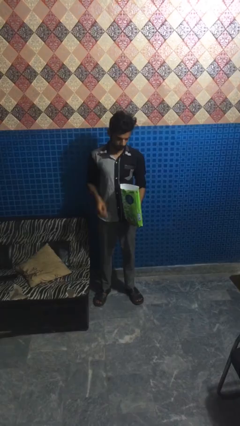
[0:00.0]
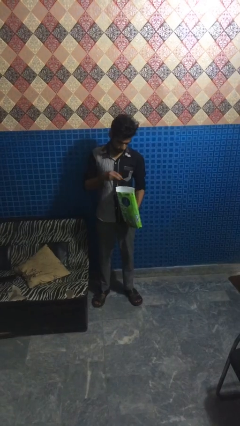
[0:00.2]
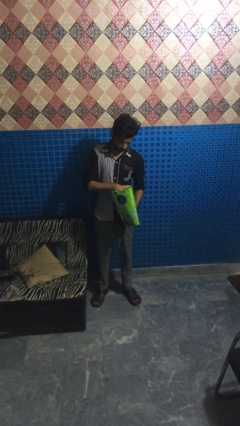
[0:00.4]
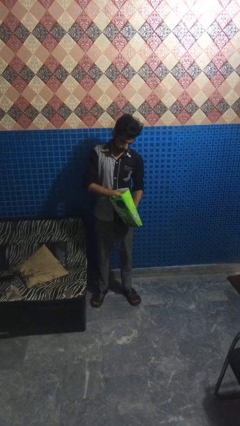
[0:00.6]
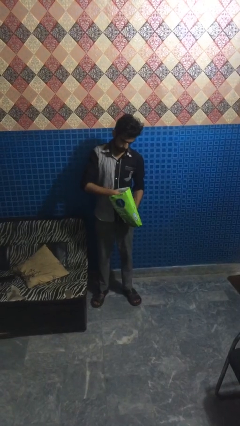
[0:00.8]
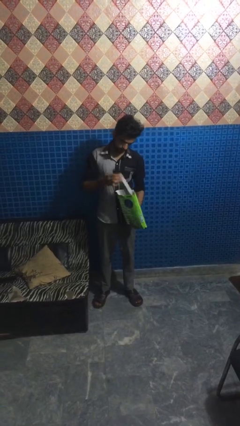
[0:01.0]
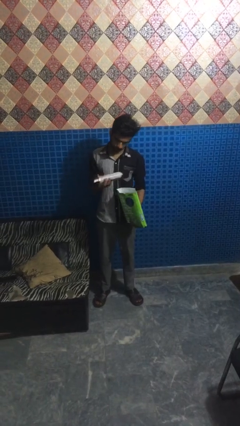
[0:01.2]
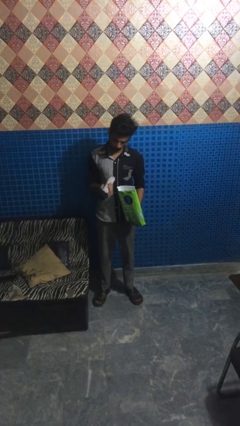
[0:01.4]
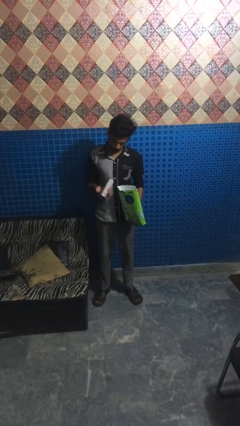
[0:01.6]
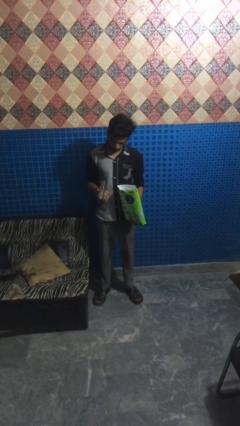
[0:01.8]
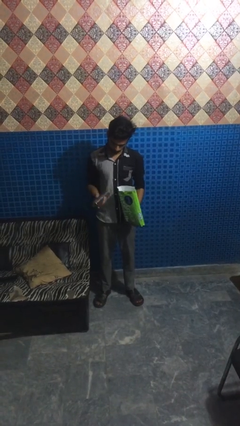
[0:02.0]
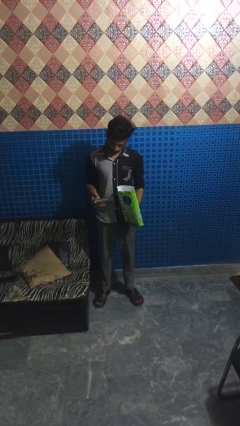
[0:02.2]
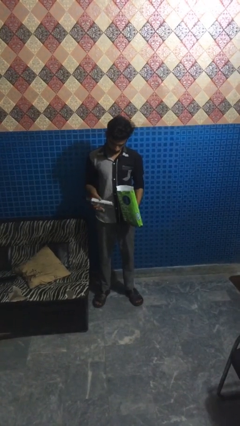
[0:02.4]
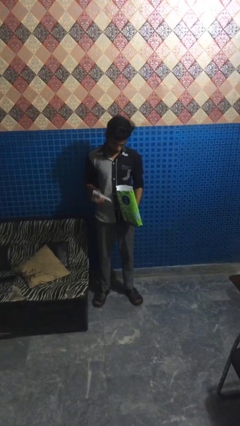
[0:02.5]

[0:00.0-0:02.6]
person takes object from bag

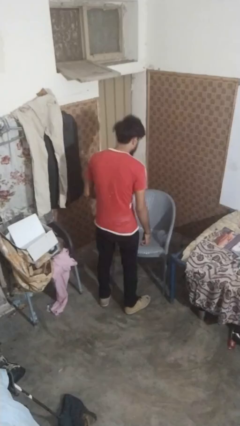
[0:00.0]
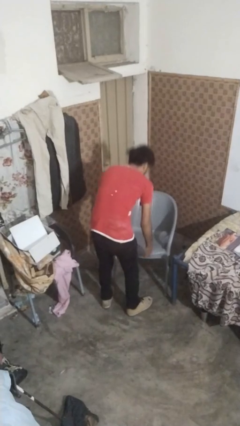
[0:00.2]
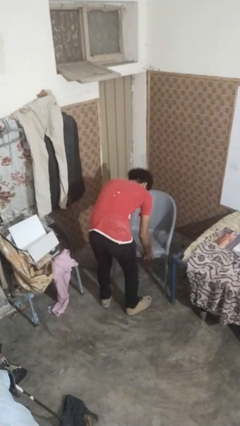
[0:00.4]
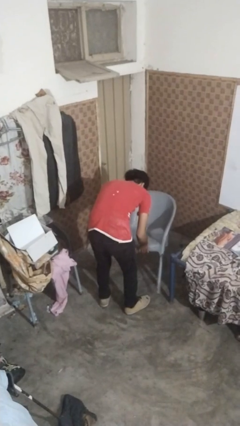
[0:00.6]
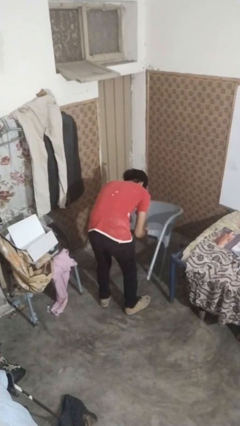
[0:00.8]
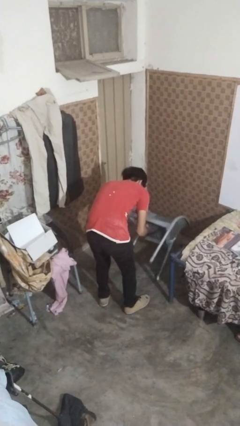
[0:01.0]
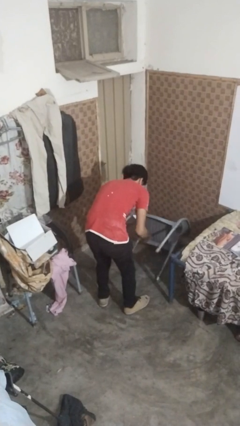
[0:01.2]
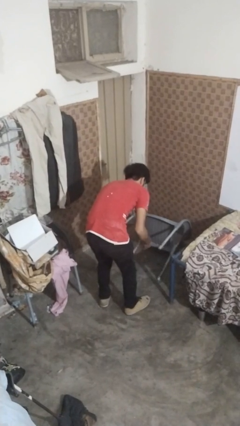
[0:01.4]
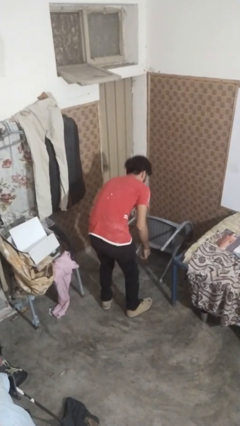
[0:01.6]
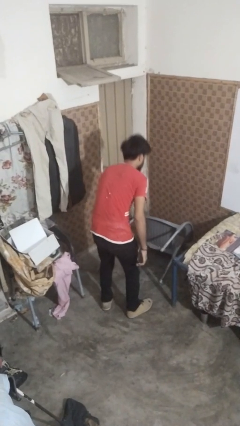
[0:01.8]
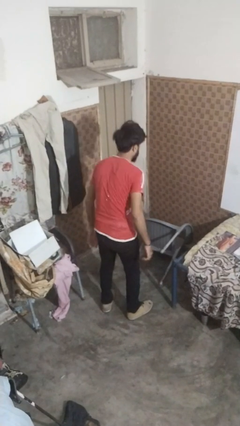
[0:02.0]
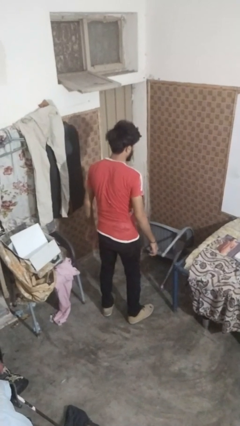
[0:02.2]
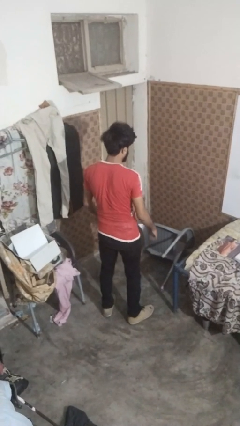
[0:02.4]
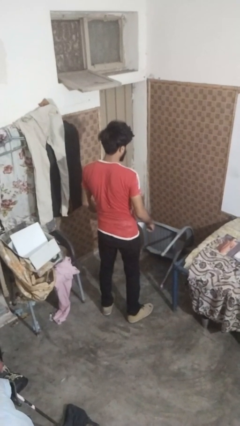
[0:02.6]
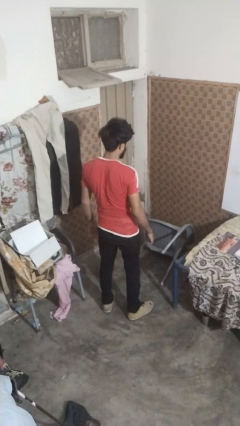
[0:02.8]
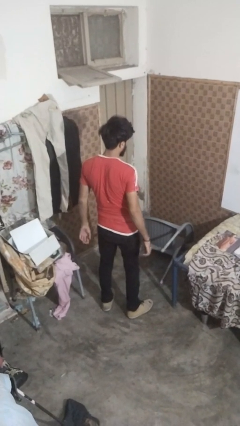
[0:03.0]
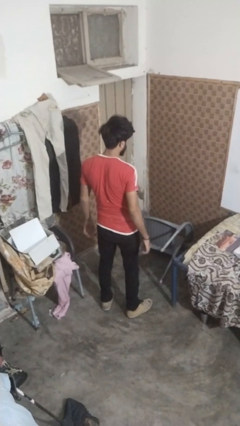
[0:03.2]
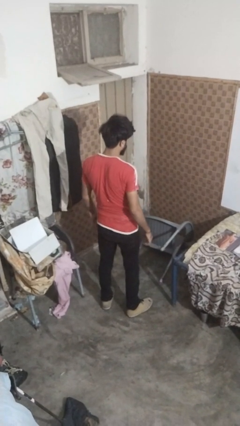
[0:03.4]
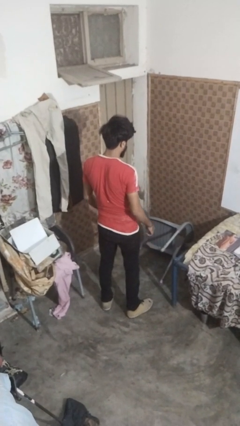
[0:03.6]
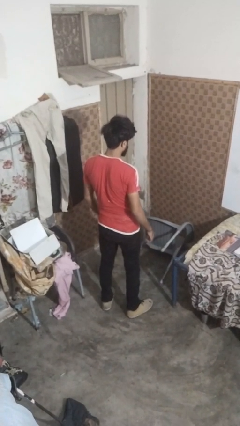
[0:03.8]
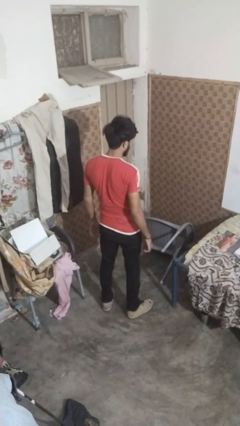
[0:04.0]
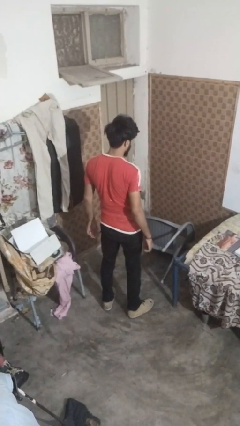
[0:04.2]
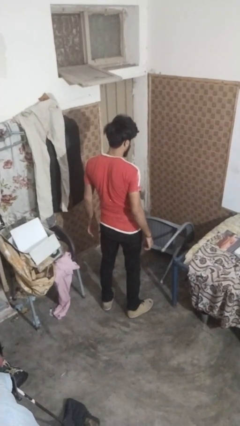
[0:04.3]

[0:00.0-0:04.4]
person knocks over furniture

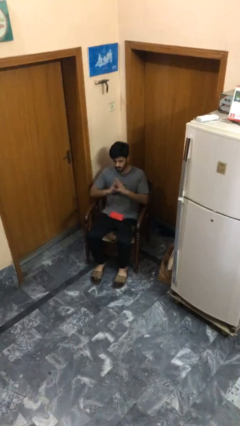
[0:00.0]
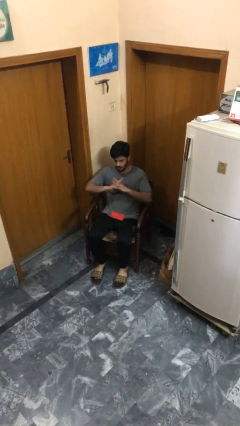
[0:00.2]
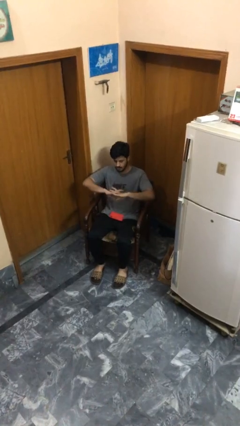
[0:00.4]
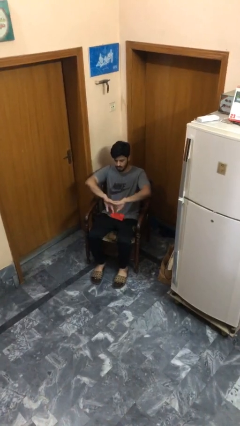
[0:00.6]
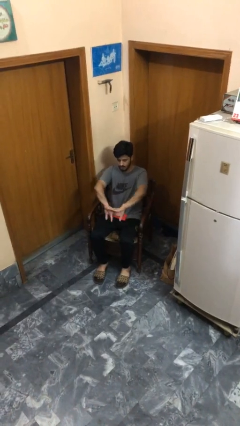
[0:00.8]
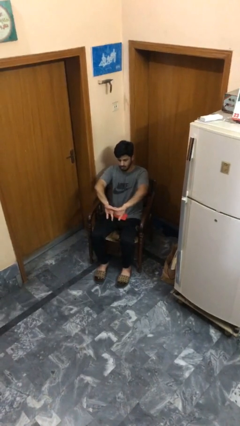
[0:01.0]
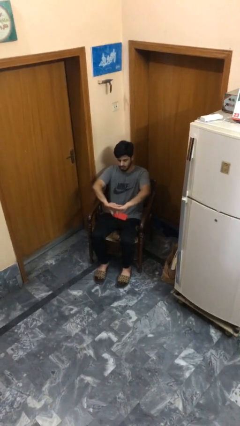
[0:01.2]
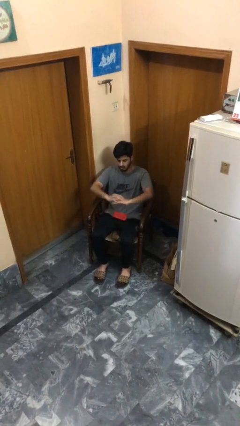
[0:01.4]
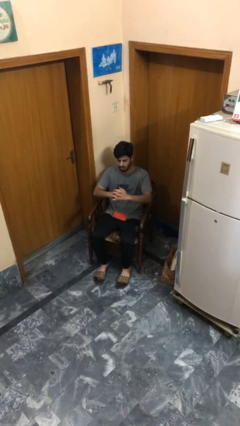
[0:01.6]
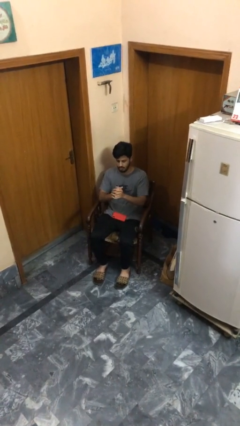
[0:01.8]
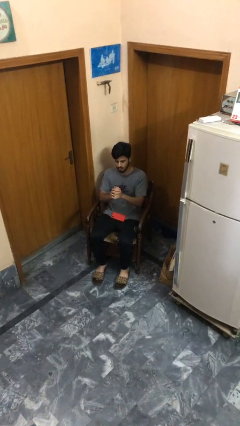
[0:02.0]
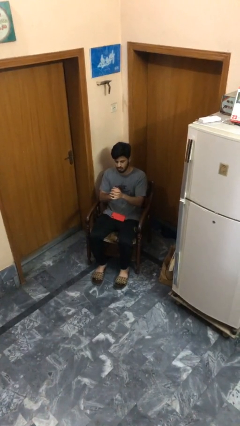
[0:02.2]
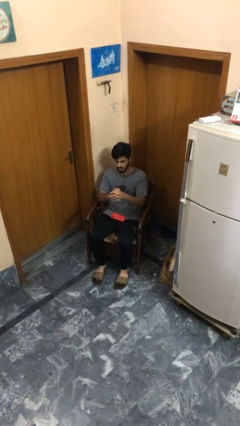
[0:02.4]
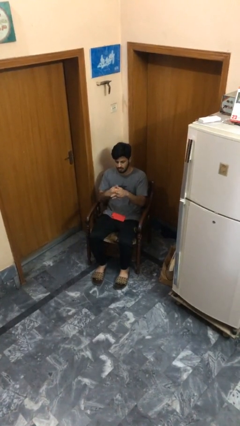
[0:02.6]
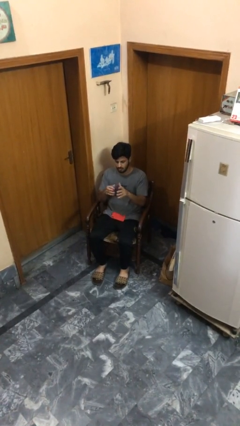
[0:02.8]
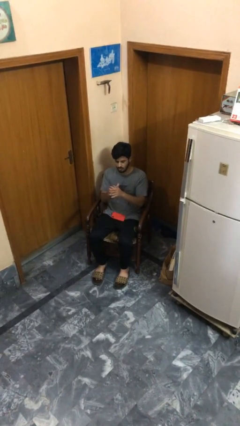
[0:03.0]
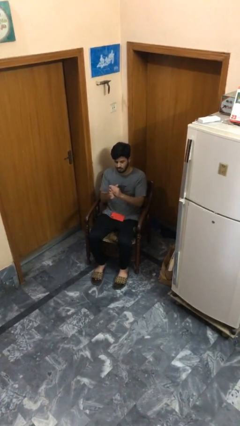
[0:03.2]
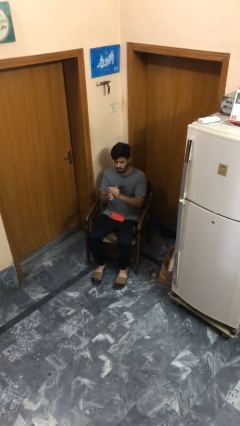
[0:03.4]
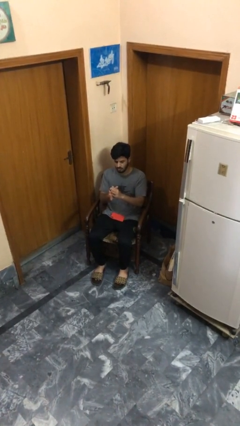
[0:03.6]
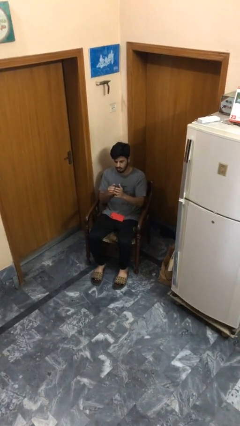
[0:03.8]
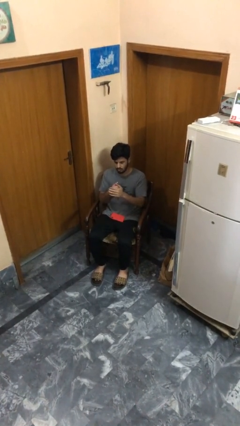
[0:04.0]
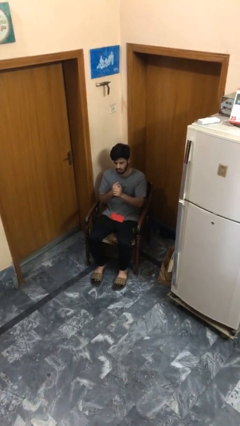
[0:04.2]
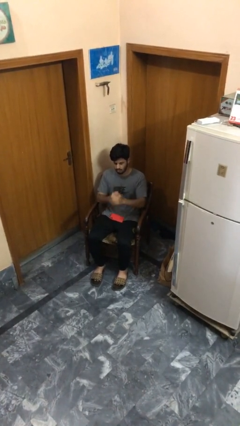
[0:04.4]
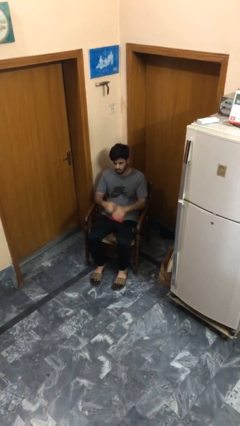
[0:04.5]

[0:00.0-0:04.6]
person cracks knuckles

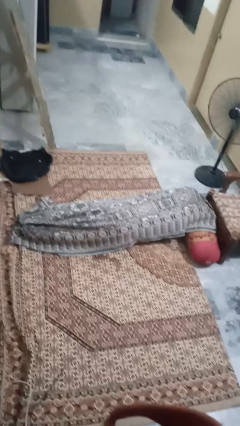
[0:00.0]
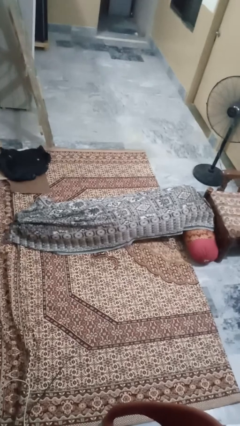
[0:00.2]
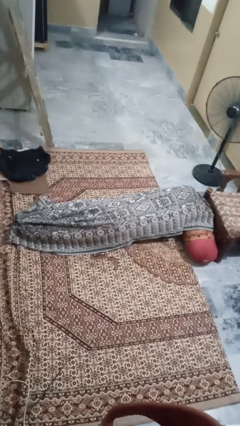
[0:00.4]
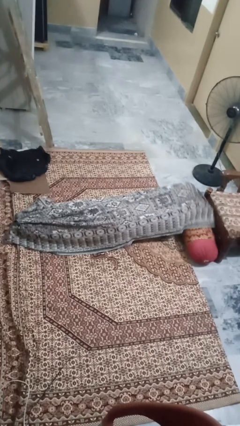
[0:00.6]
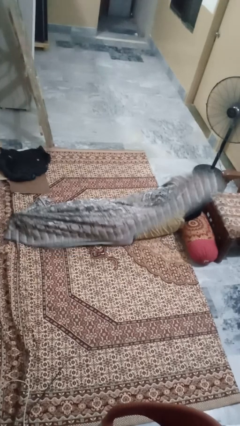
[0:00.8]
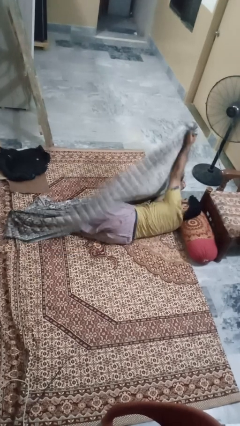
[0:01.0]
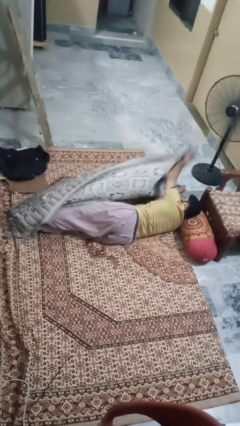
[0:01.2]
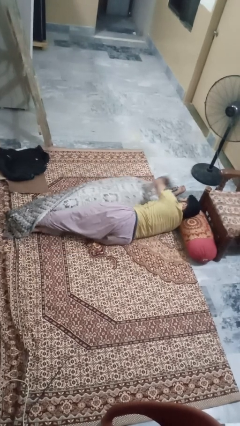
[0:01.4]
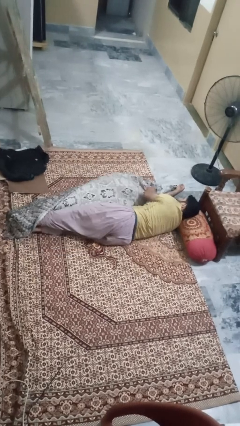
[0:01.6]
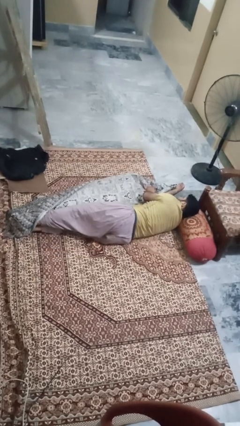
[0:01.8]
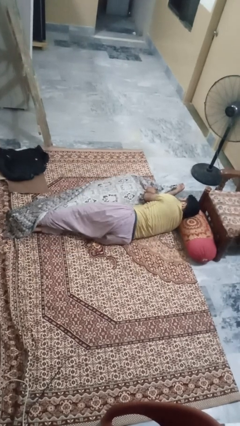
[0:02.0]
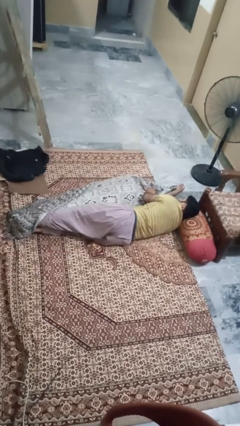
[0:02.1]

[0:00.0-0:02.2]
person uncovers with blanket

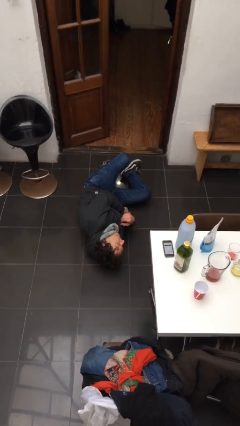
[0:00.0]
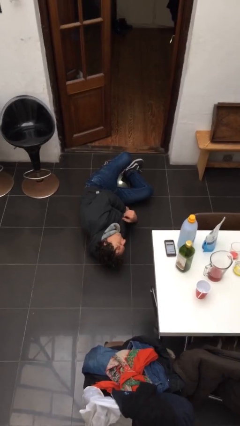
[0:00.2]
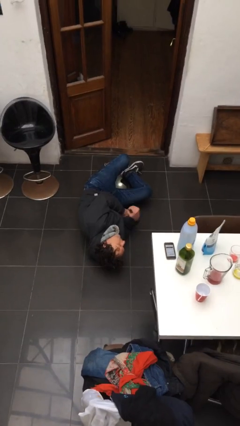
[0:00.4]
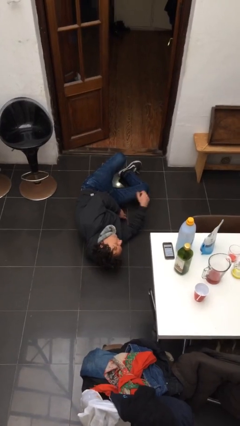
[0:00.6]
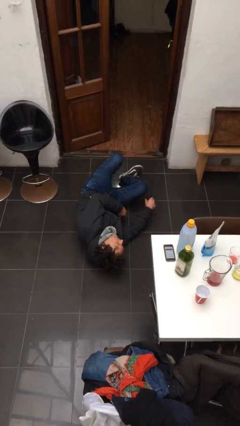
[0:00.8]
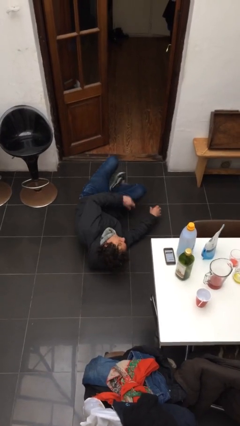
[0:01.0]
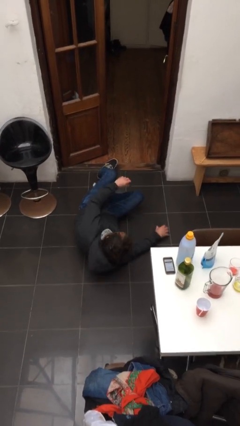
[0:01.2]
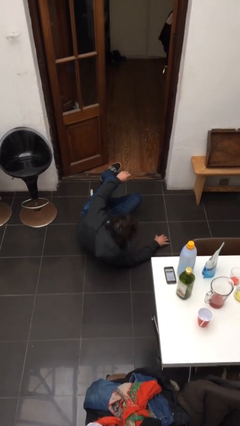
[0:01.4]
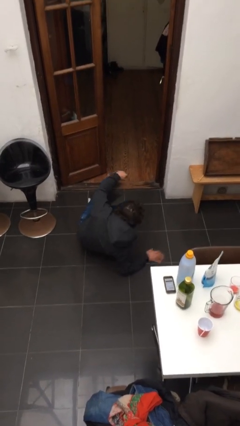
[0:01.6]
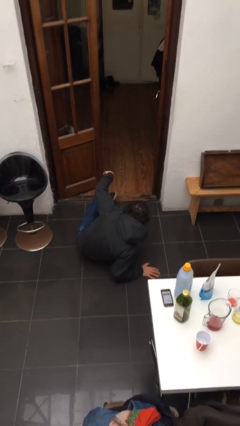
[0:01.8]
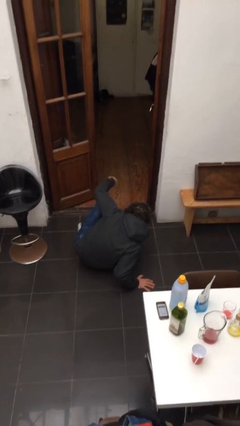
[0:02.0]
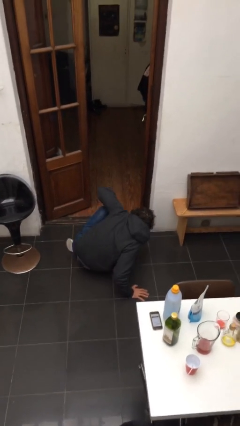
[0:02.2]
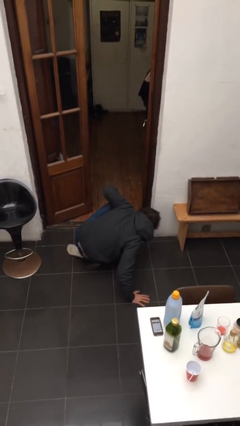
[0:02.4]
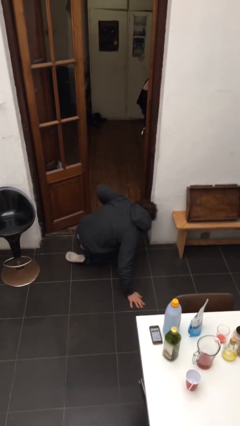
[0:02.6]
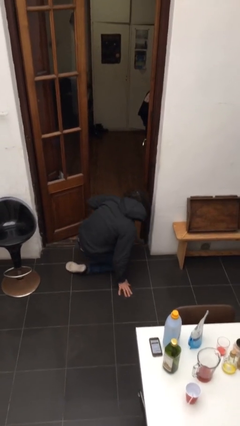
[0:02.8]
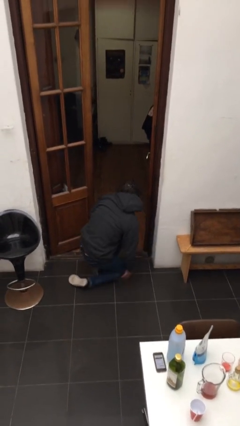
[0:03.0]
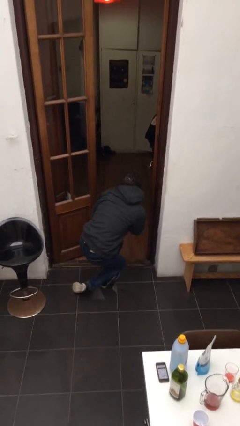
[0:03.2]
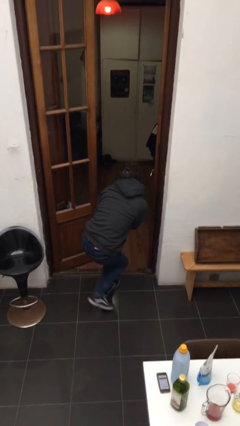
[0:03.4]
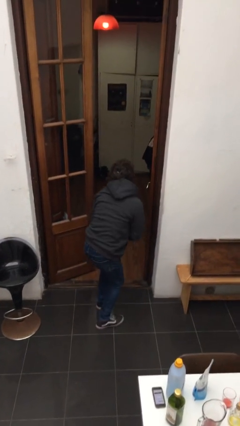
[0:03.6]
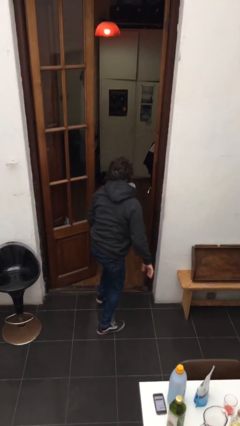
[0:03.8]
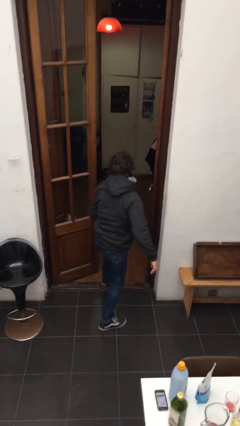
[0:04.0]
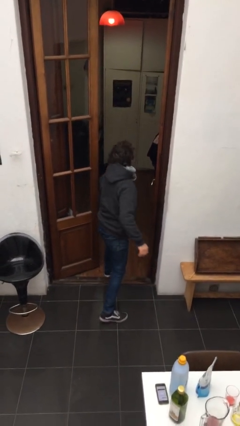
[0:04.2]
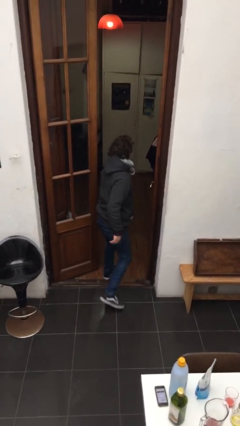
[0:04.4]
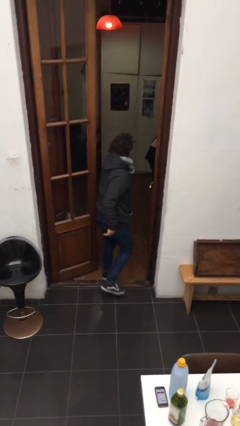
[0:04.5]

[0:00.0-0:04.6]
person stands up from floor
